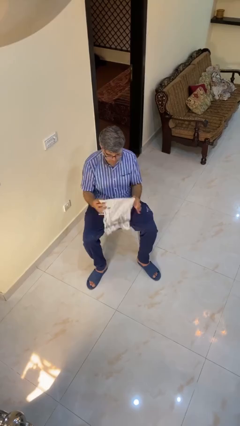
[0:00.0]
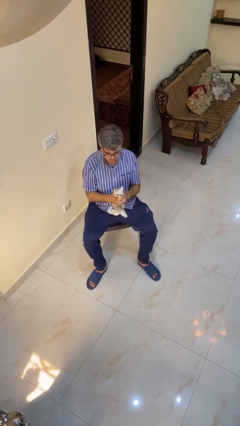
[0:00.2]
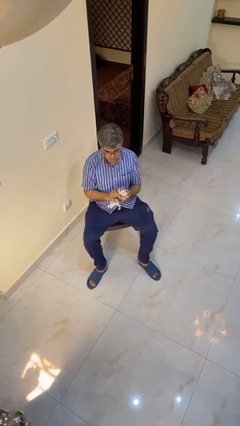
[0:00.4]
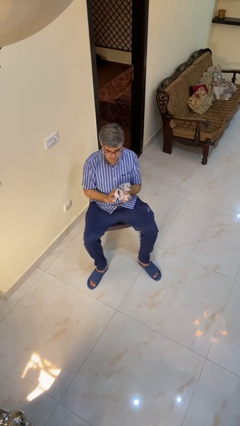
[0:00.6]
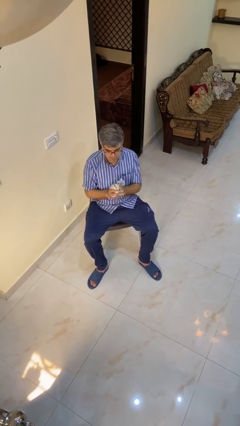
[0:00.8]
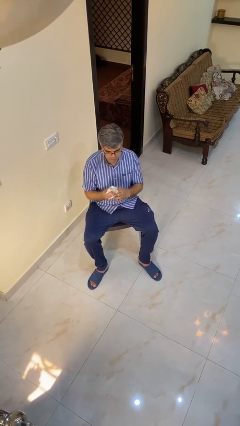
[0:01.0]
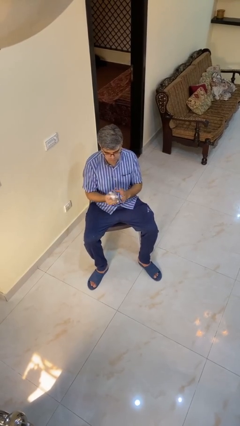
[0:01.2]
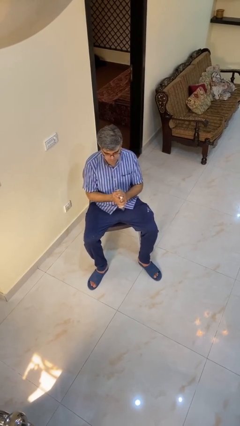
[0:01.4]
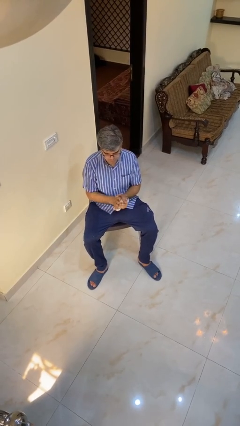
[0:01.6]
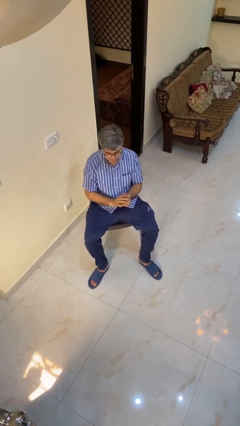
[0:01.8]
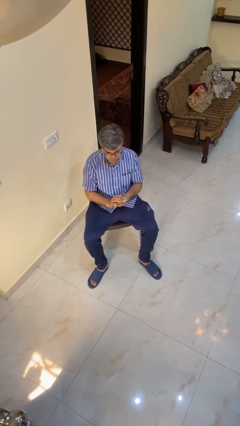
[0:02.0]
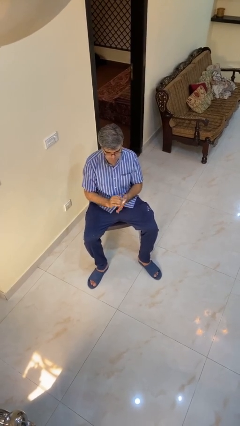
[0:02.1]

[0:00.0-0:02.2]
person crumples paper

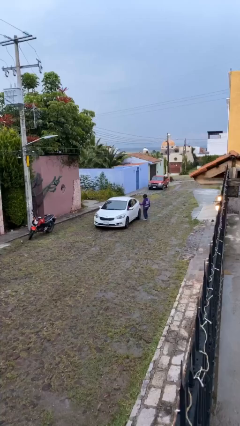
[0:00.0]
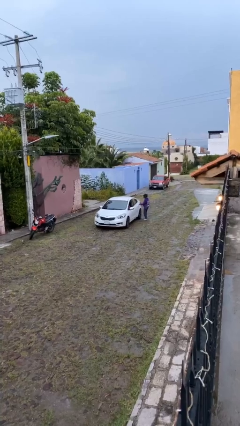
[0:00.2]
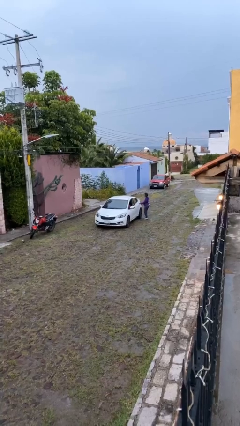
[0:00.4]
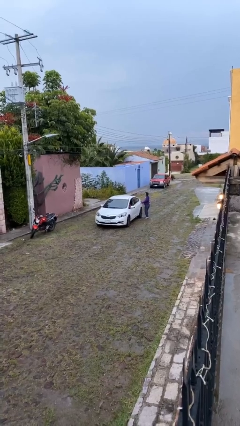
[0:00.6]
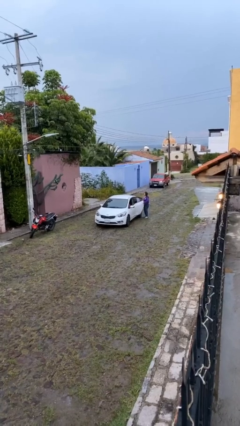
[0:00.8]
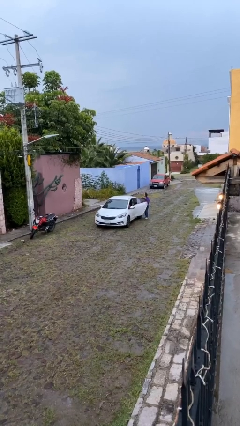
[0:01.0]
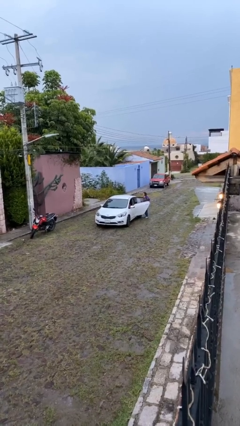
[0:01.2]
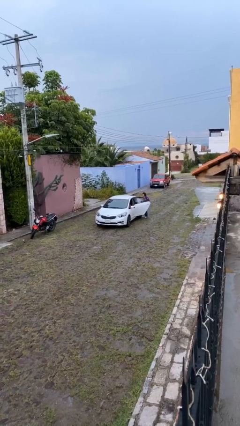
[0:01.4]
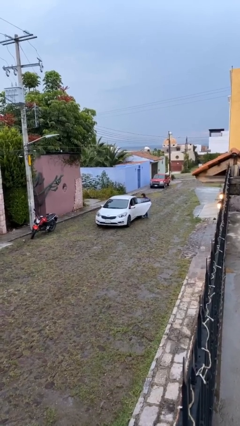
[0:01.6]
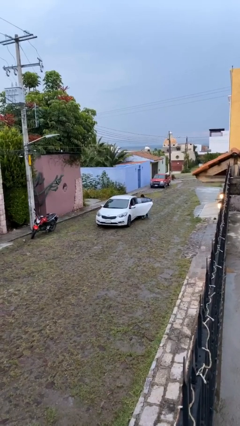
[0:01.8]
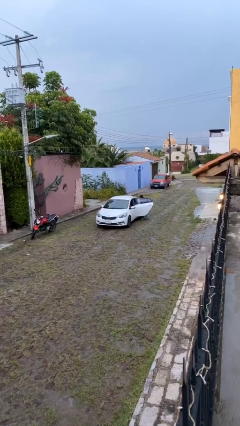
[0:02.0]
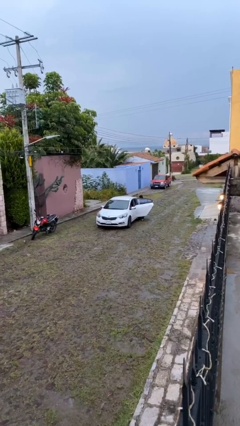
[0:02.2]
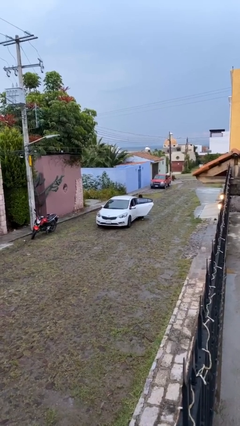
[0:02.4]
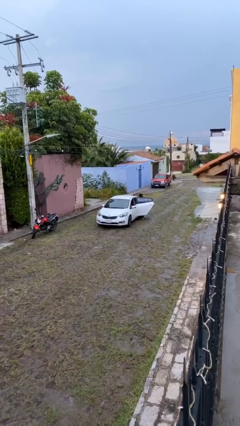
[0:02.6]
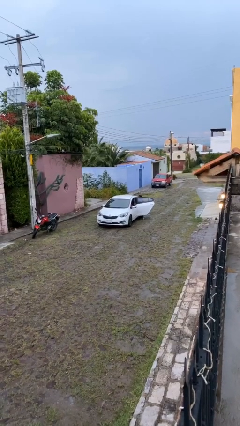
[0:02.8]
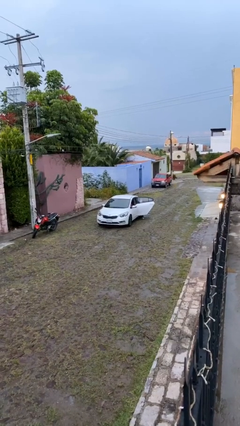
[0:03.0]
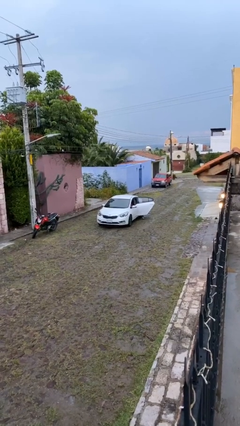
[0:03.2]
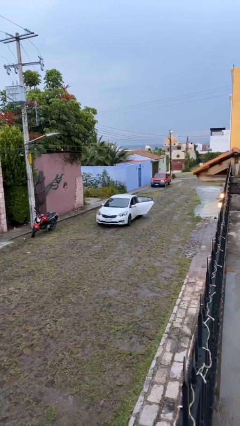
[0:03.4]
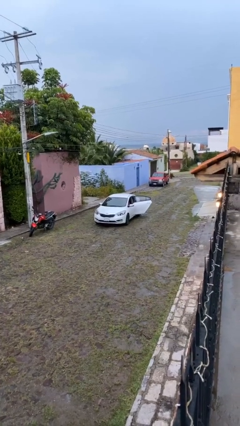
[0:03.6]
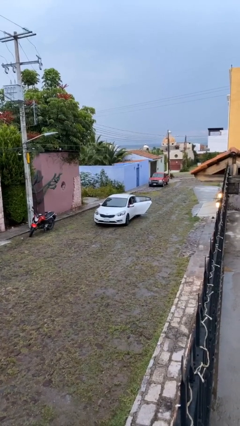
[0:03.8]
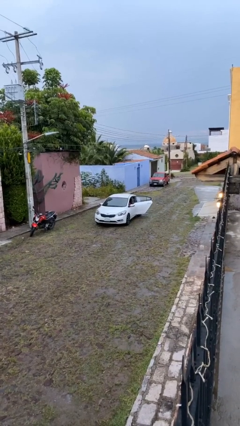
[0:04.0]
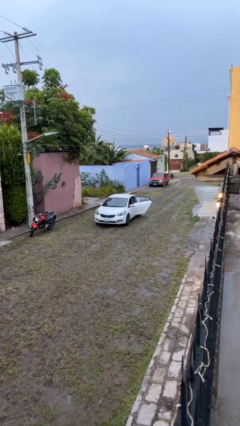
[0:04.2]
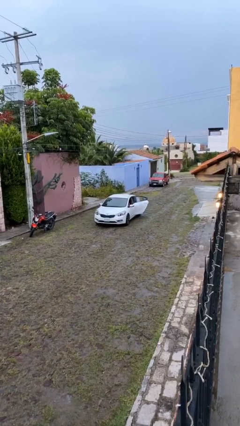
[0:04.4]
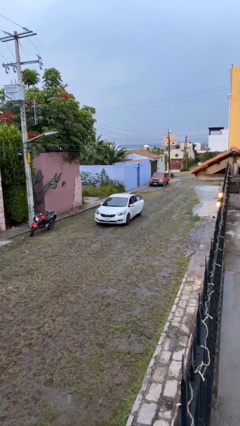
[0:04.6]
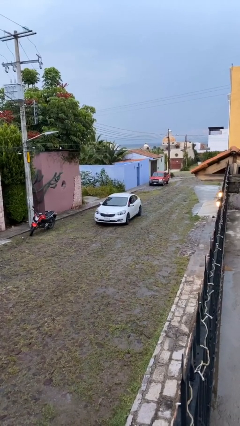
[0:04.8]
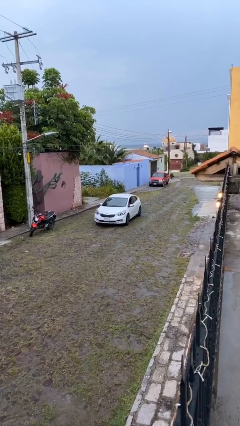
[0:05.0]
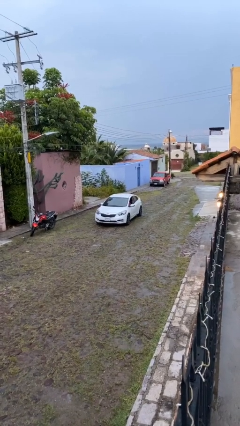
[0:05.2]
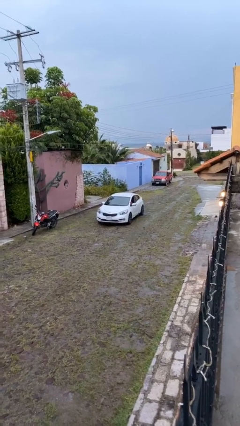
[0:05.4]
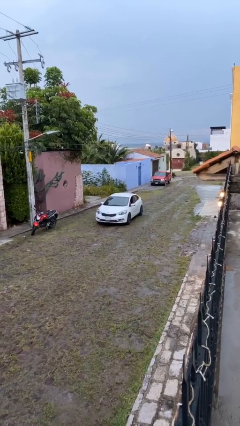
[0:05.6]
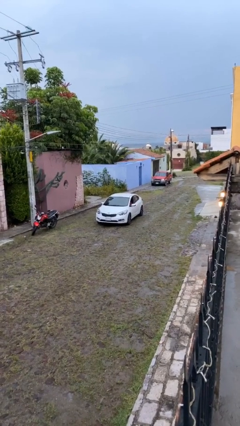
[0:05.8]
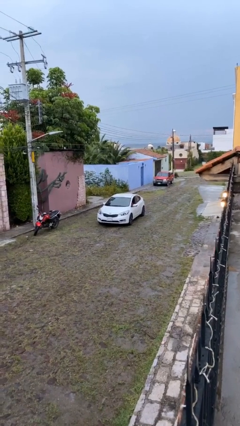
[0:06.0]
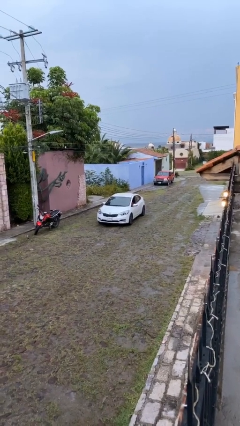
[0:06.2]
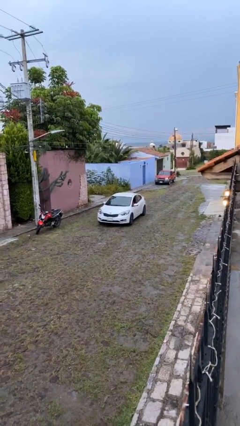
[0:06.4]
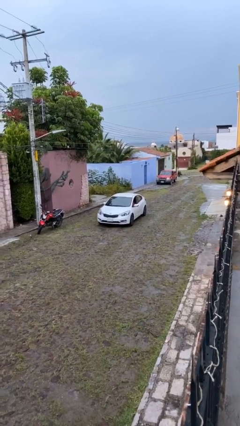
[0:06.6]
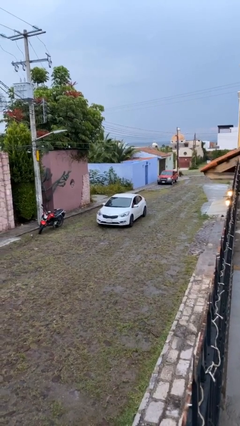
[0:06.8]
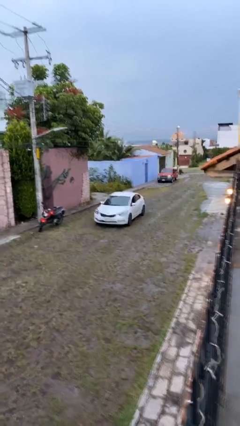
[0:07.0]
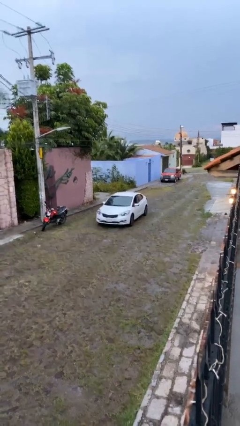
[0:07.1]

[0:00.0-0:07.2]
car picks up person

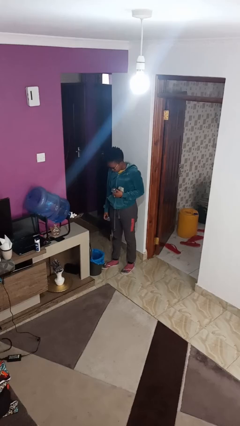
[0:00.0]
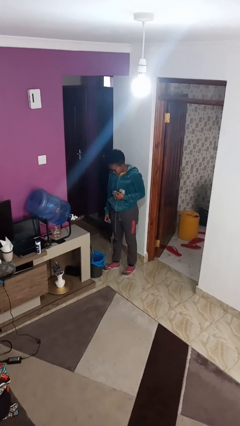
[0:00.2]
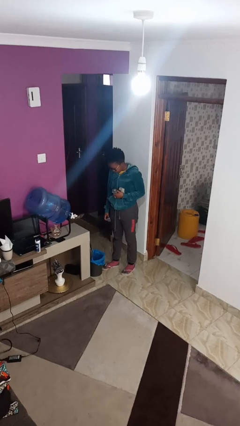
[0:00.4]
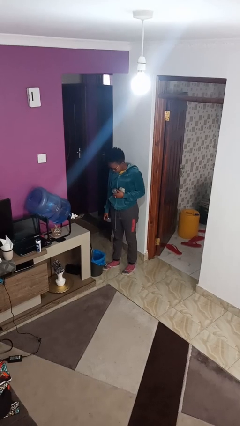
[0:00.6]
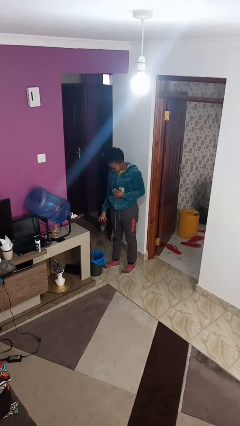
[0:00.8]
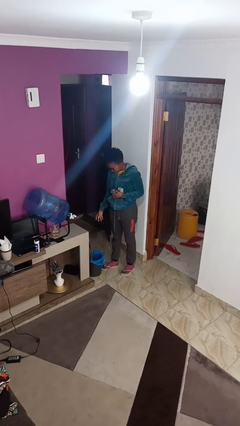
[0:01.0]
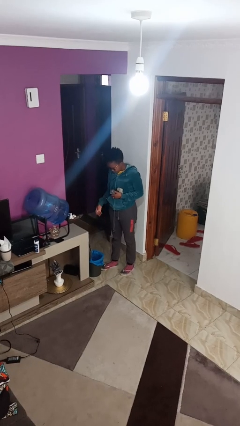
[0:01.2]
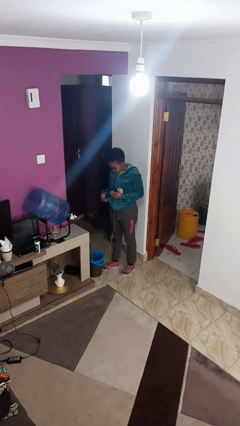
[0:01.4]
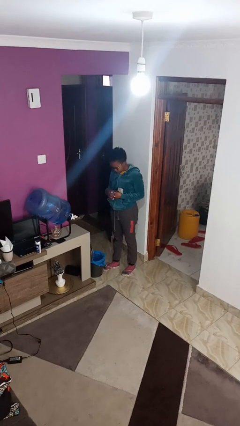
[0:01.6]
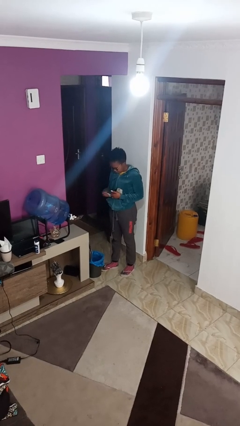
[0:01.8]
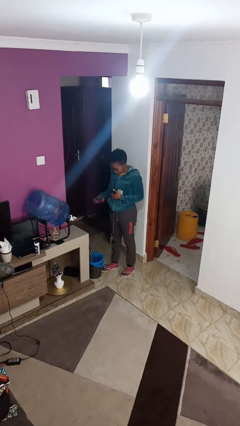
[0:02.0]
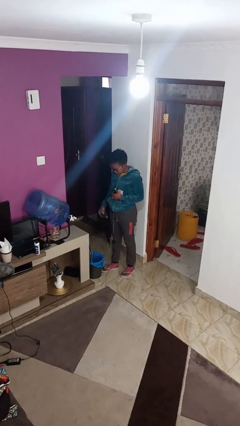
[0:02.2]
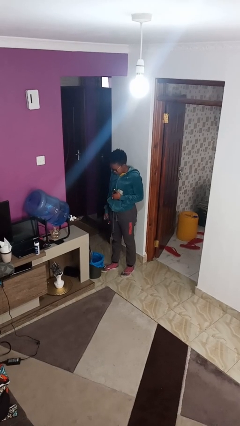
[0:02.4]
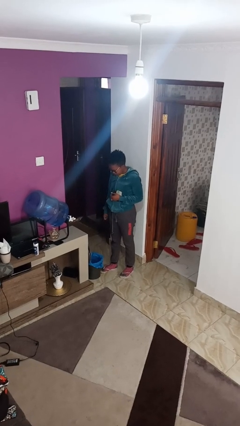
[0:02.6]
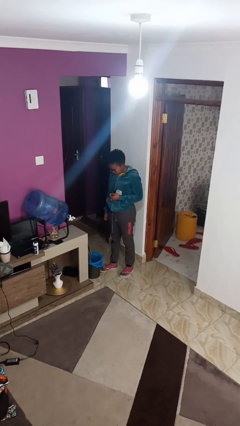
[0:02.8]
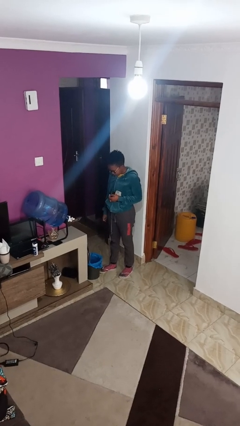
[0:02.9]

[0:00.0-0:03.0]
person discards trash

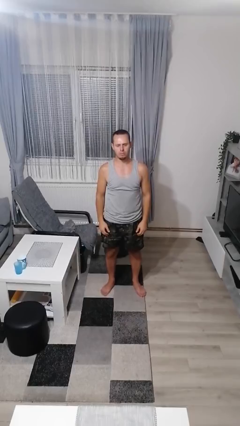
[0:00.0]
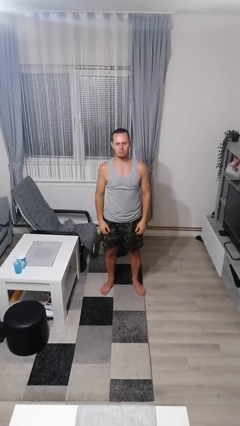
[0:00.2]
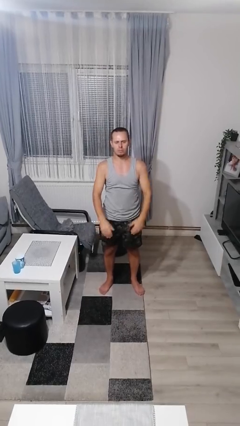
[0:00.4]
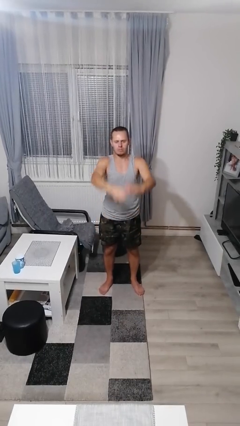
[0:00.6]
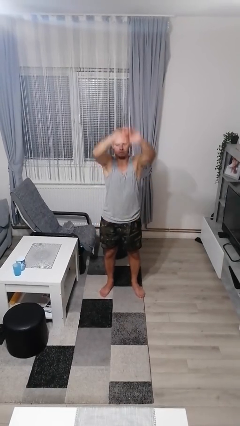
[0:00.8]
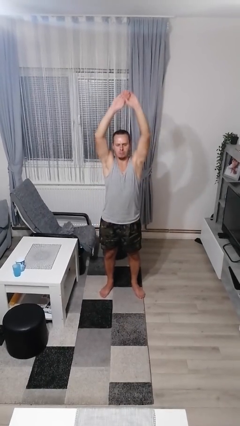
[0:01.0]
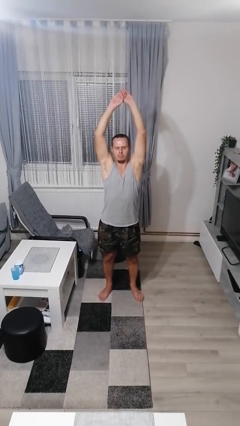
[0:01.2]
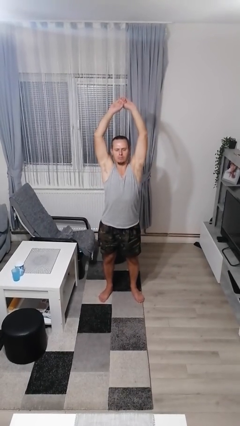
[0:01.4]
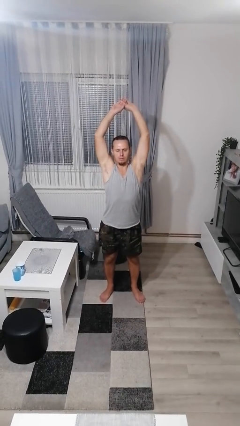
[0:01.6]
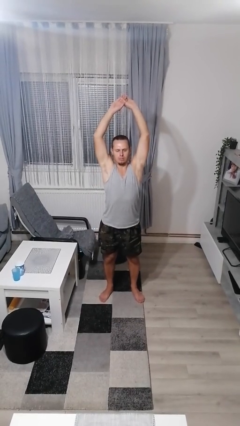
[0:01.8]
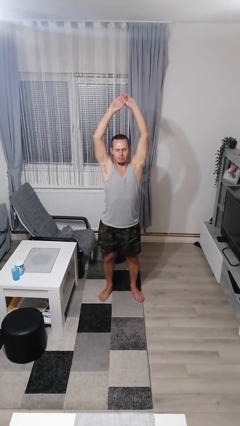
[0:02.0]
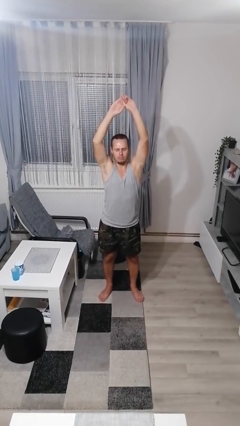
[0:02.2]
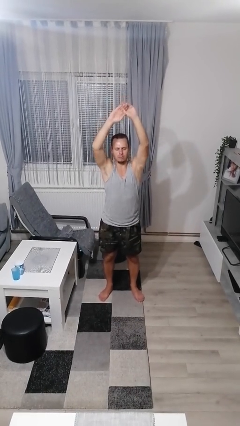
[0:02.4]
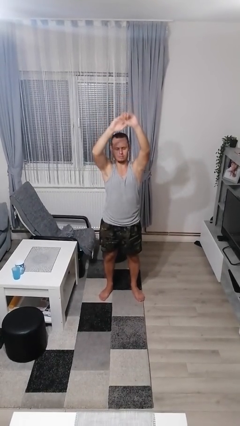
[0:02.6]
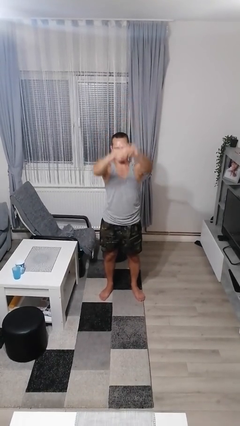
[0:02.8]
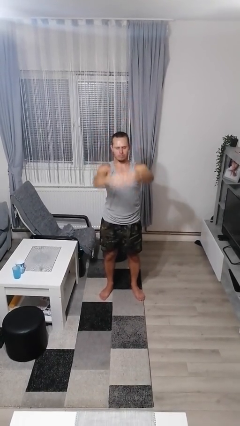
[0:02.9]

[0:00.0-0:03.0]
person stretches arms over head

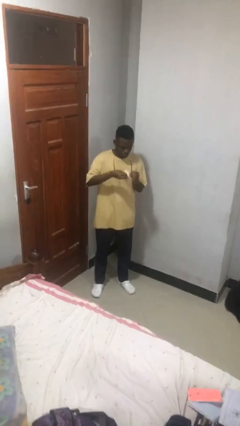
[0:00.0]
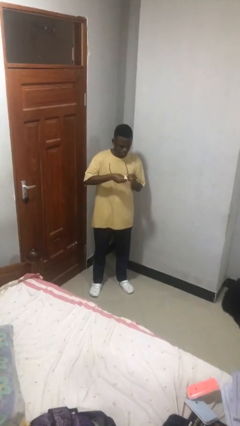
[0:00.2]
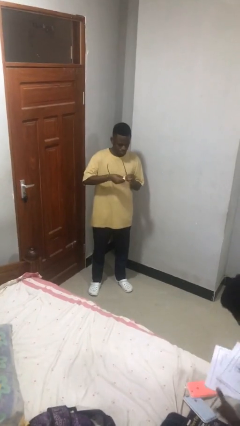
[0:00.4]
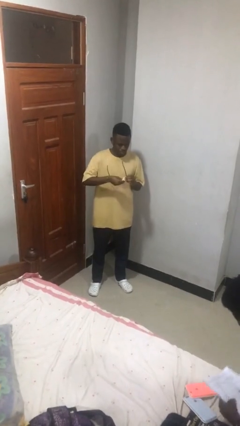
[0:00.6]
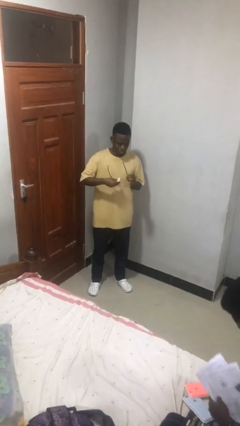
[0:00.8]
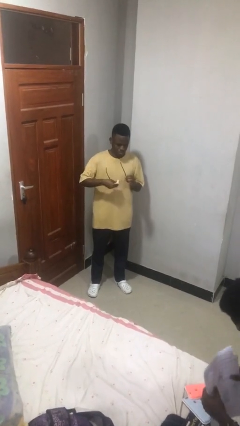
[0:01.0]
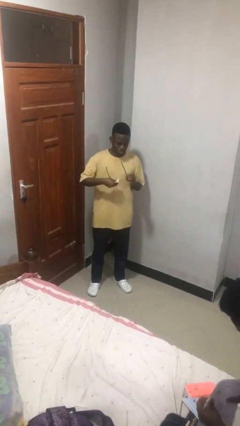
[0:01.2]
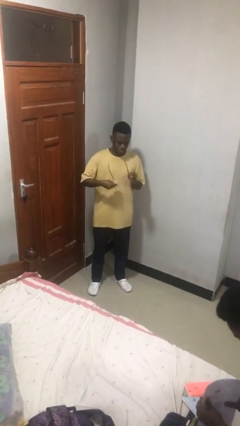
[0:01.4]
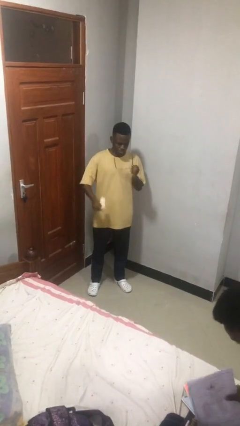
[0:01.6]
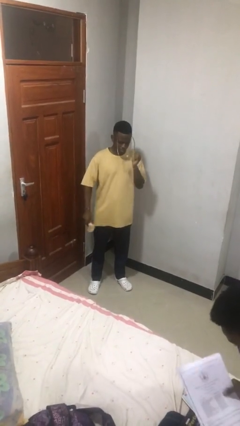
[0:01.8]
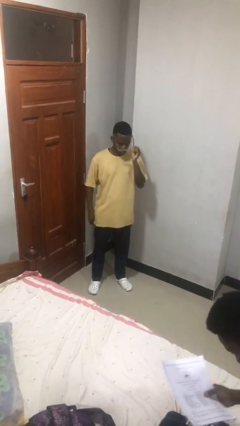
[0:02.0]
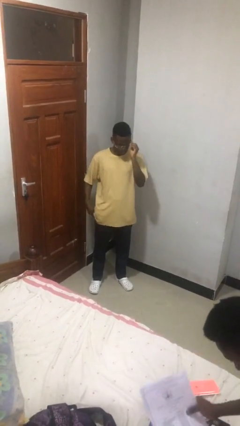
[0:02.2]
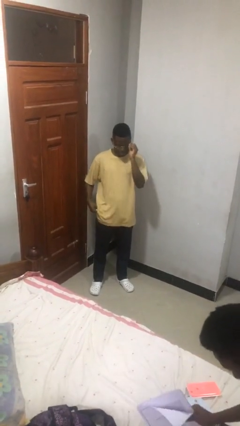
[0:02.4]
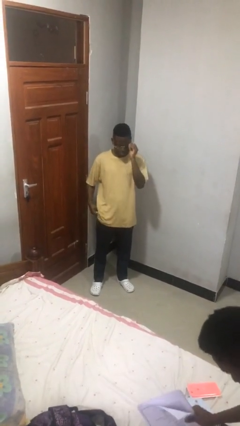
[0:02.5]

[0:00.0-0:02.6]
person cleans eyeglasses
